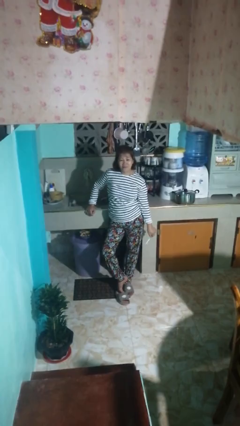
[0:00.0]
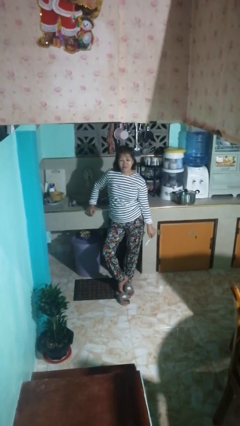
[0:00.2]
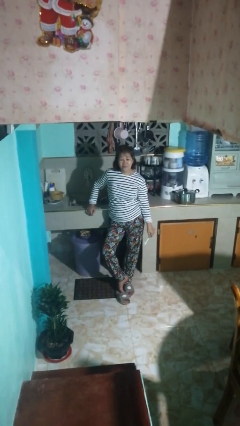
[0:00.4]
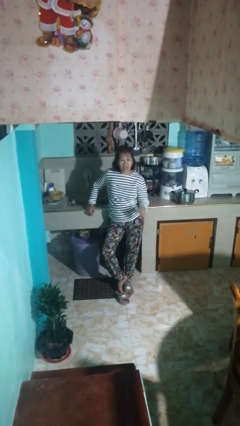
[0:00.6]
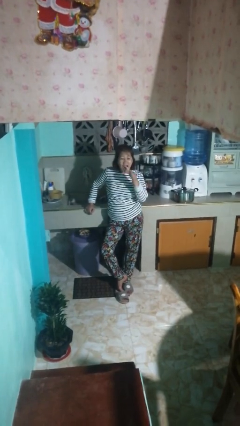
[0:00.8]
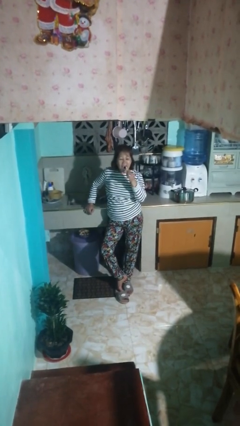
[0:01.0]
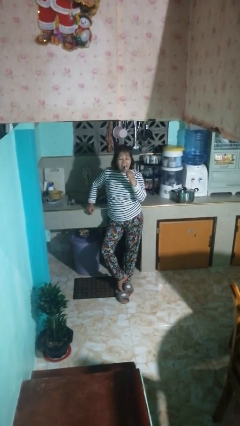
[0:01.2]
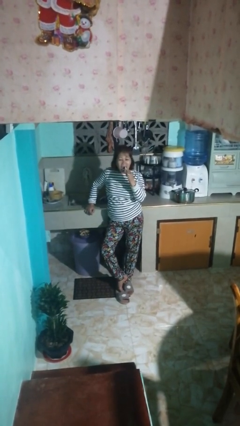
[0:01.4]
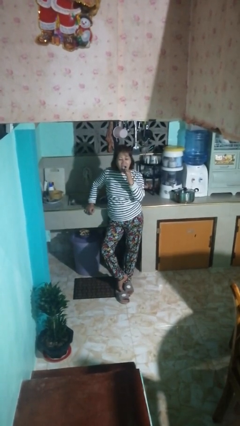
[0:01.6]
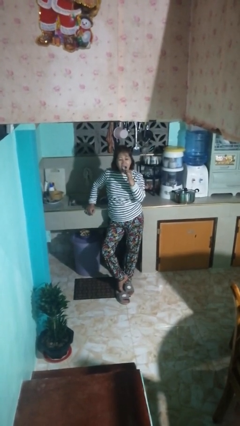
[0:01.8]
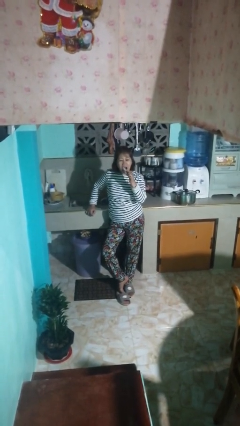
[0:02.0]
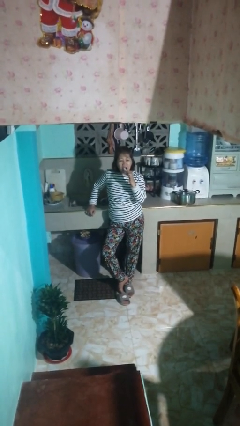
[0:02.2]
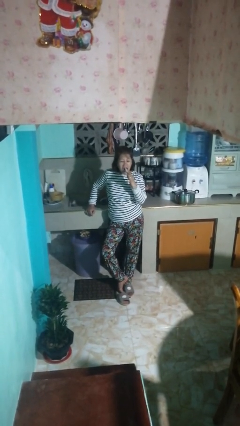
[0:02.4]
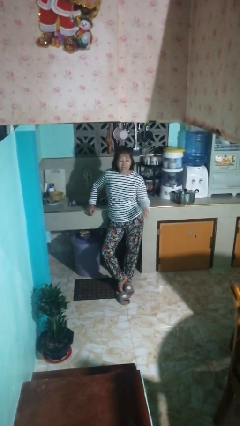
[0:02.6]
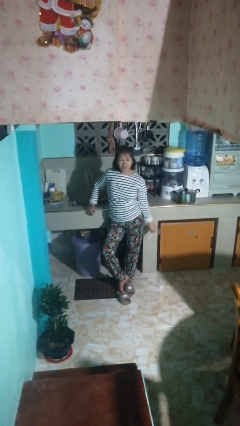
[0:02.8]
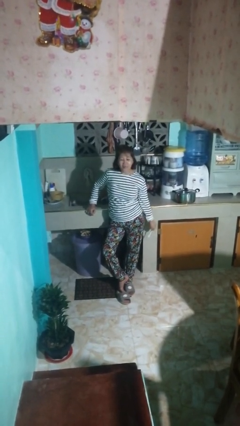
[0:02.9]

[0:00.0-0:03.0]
person brushes teeth

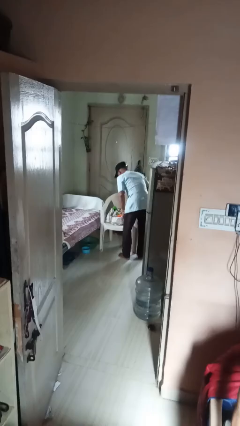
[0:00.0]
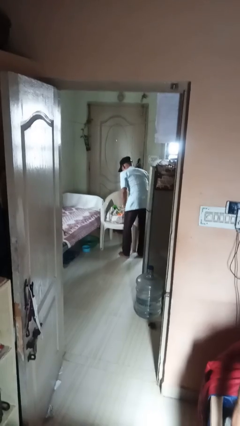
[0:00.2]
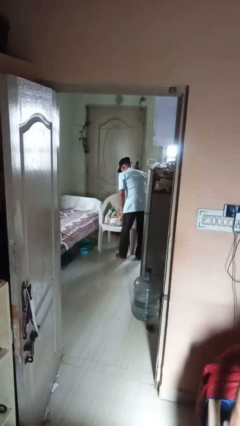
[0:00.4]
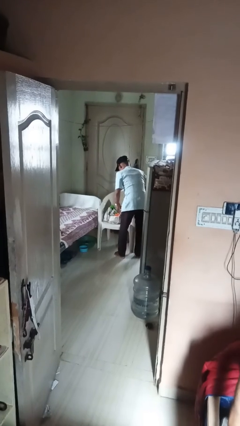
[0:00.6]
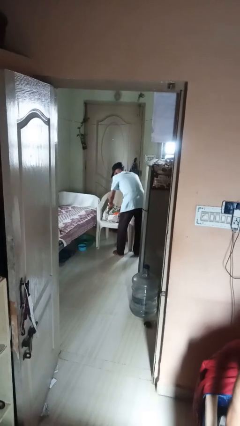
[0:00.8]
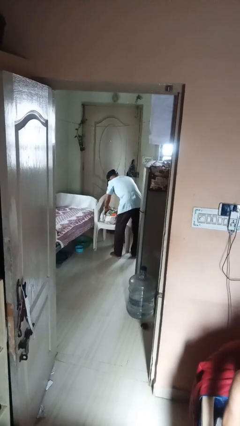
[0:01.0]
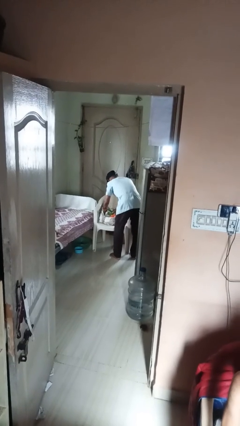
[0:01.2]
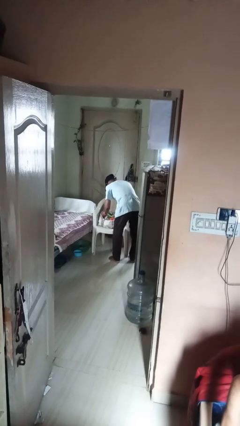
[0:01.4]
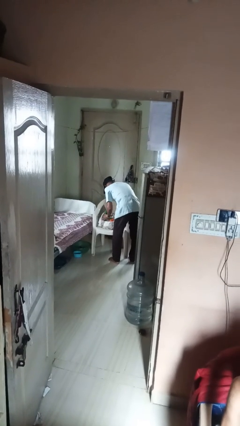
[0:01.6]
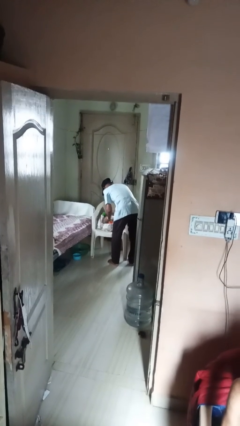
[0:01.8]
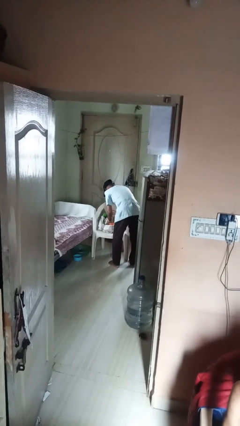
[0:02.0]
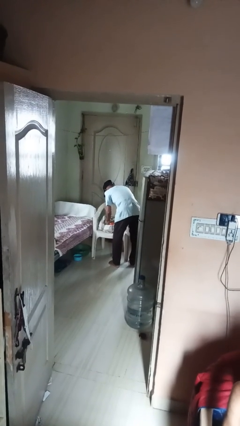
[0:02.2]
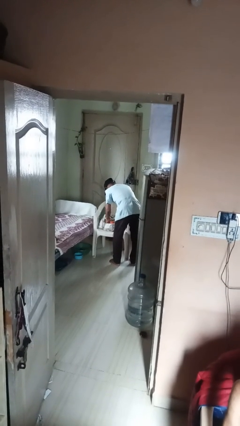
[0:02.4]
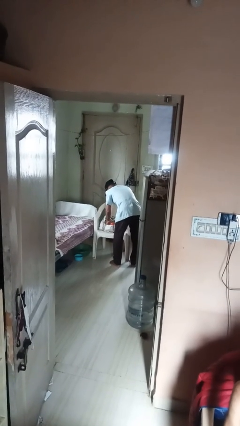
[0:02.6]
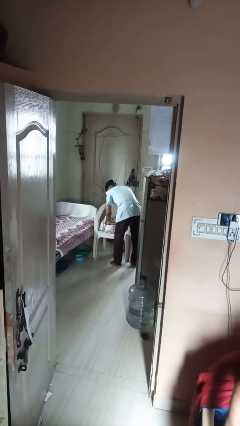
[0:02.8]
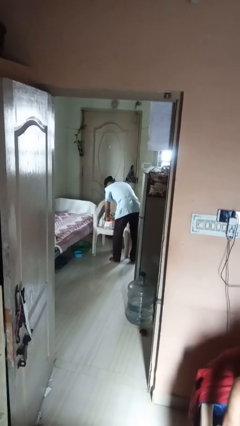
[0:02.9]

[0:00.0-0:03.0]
person searches in bag

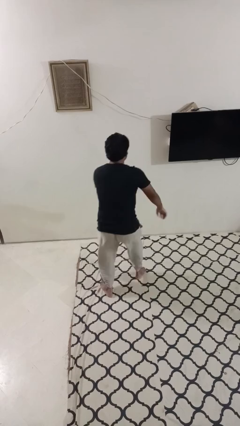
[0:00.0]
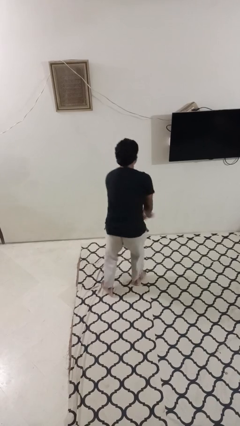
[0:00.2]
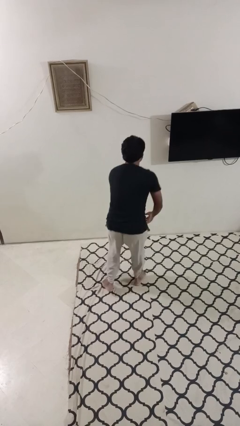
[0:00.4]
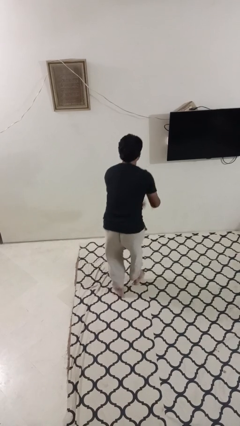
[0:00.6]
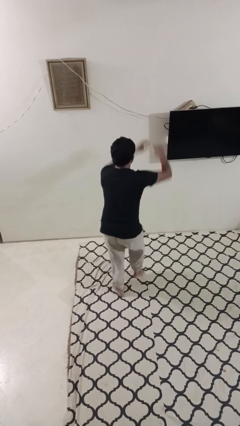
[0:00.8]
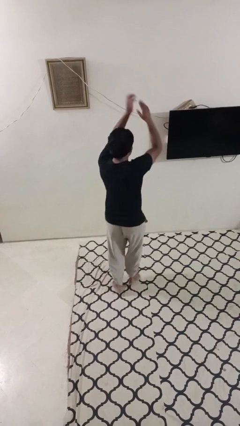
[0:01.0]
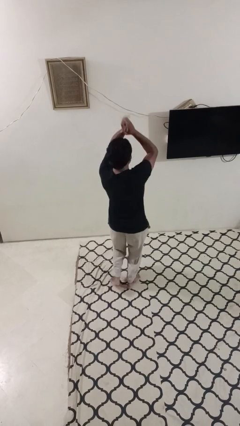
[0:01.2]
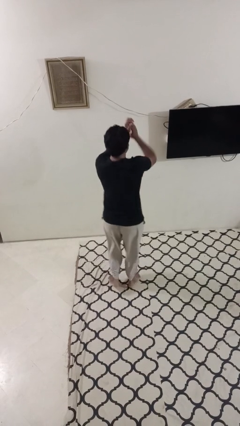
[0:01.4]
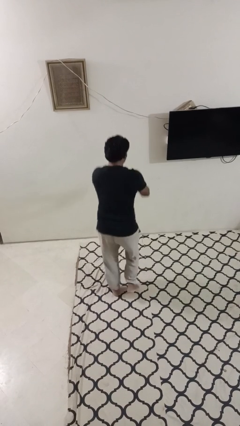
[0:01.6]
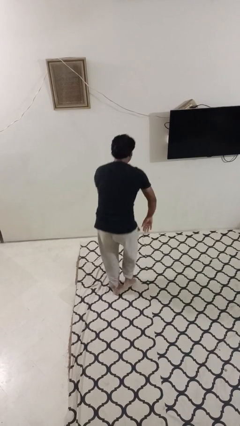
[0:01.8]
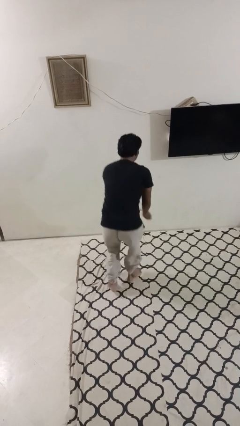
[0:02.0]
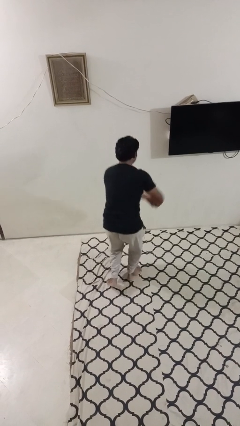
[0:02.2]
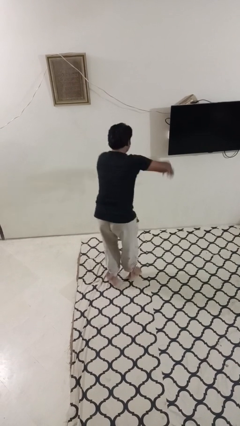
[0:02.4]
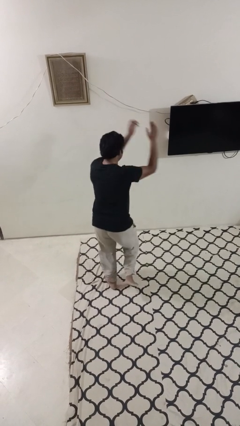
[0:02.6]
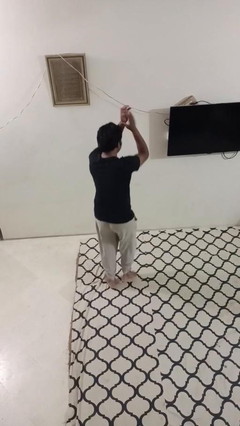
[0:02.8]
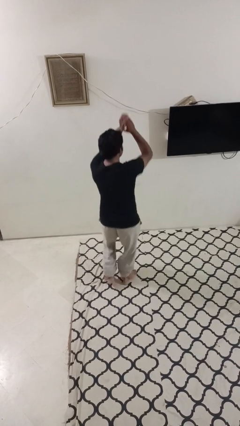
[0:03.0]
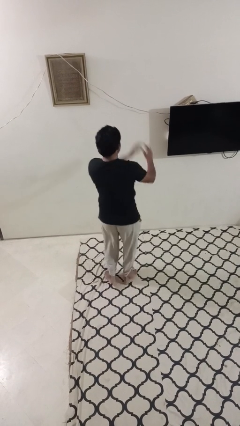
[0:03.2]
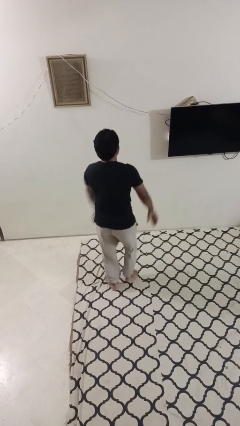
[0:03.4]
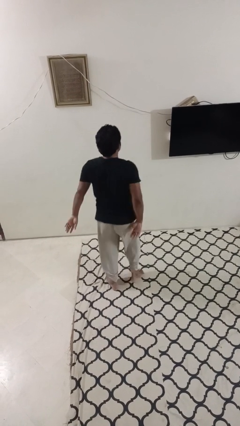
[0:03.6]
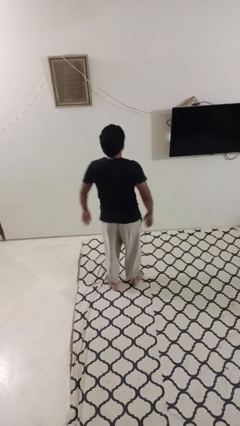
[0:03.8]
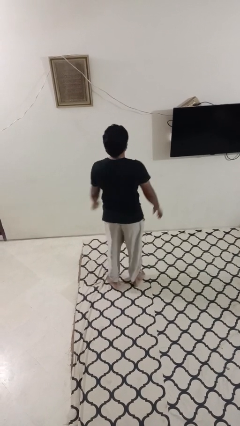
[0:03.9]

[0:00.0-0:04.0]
person dances in place

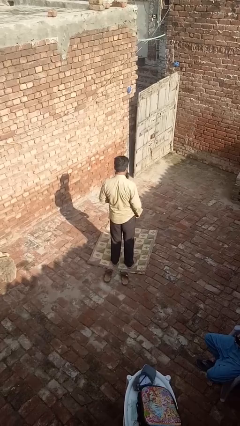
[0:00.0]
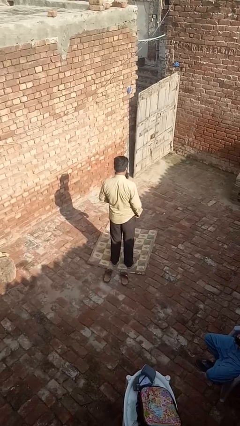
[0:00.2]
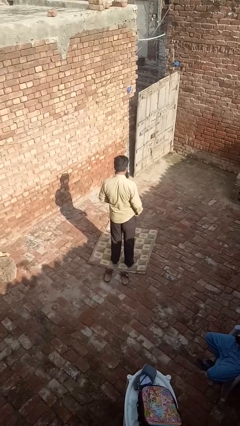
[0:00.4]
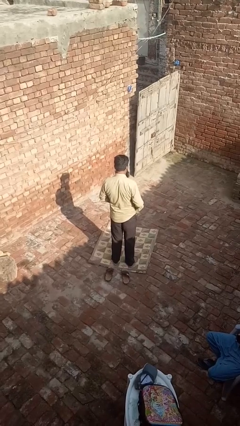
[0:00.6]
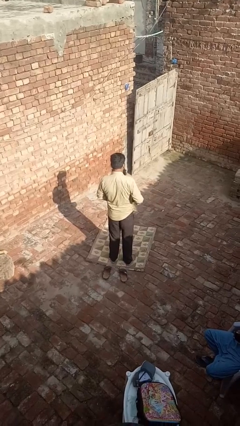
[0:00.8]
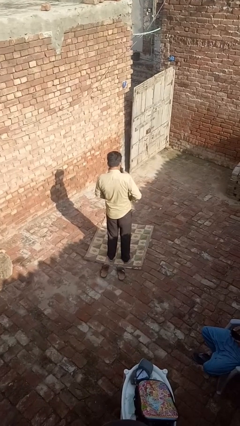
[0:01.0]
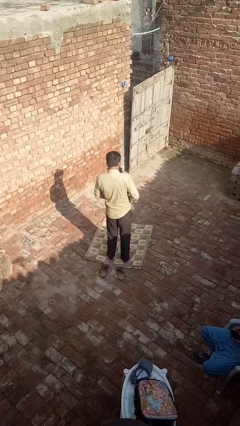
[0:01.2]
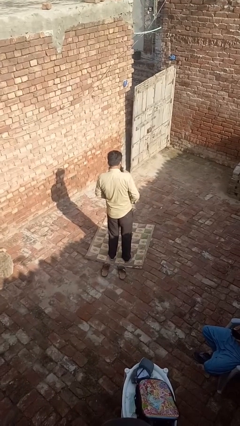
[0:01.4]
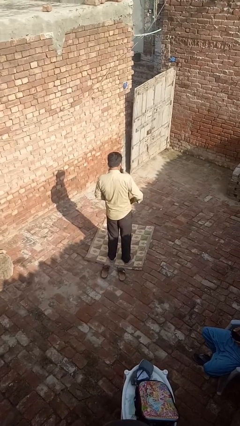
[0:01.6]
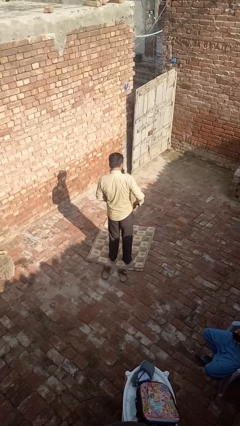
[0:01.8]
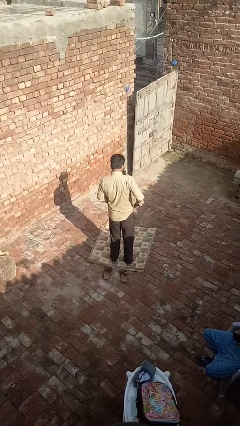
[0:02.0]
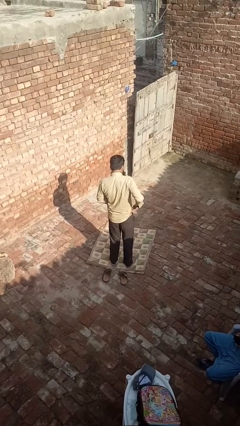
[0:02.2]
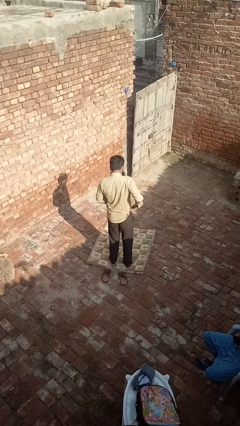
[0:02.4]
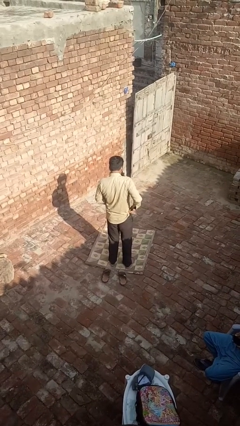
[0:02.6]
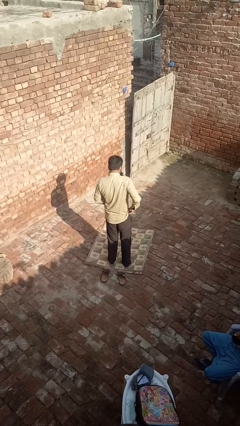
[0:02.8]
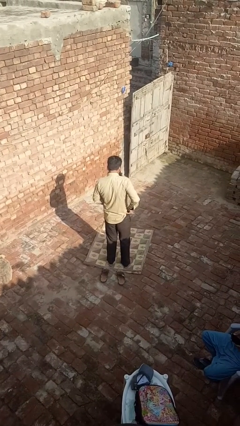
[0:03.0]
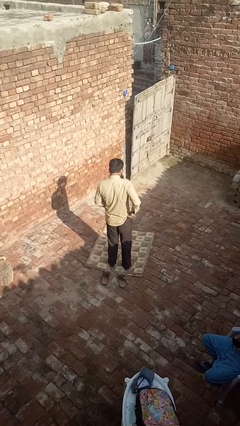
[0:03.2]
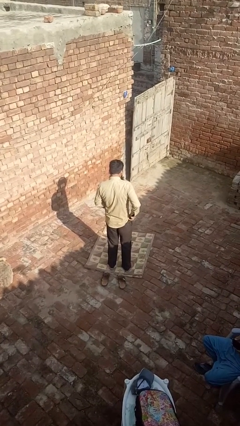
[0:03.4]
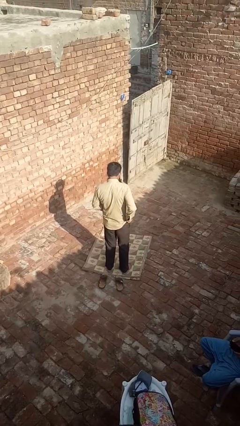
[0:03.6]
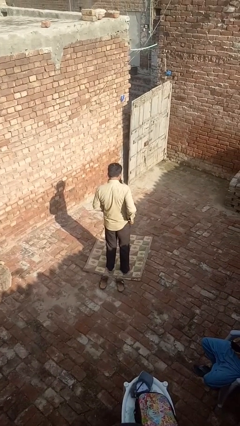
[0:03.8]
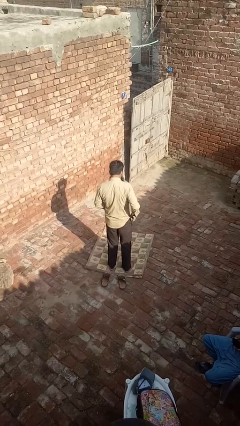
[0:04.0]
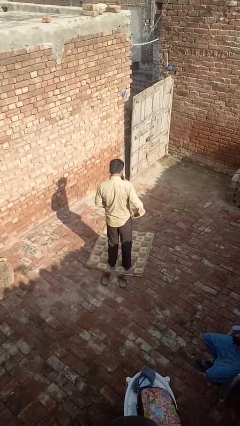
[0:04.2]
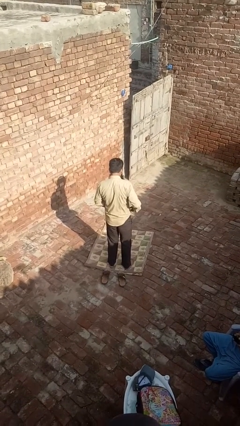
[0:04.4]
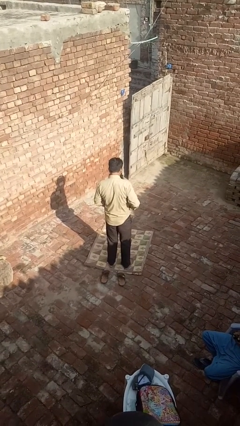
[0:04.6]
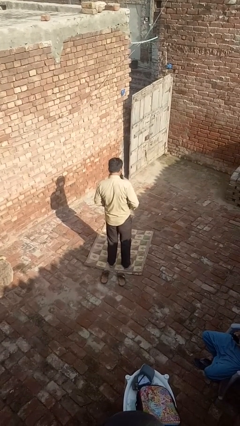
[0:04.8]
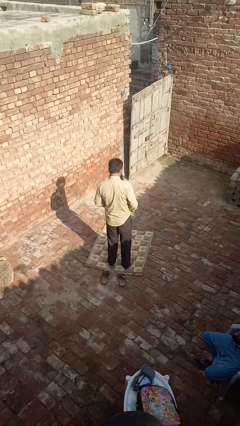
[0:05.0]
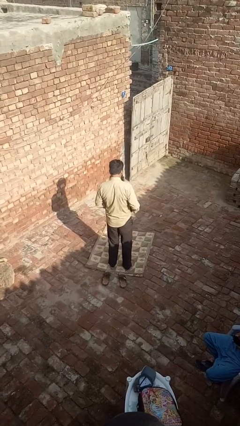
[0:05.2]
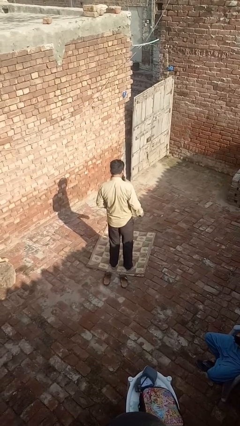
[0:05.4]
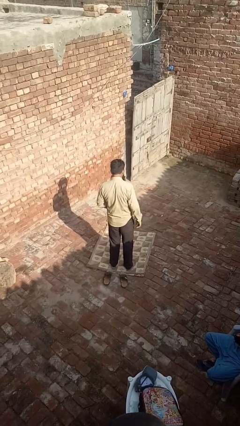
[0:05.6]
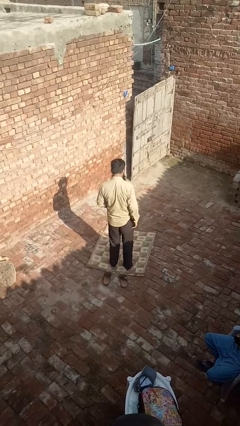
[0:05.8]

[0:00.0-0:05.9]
person tucks in shirt

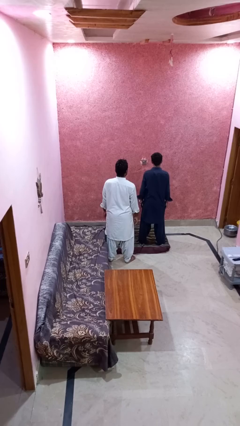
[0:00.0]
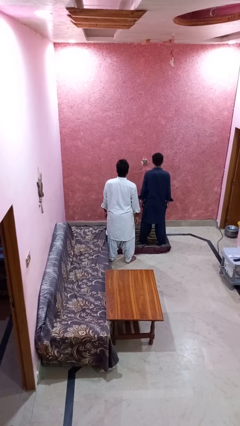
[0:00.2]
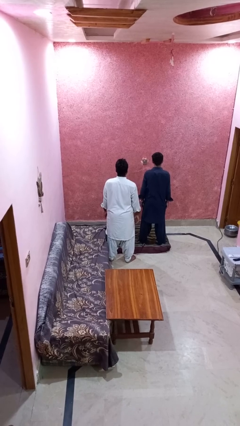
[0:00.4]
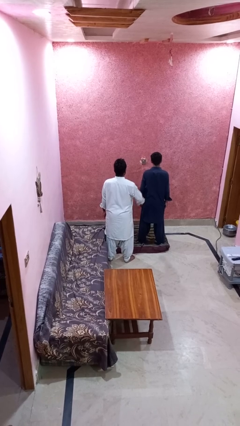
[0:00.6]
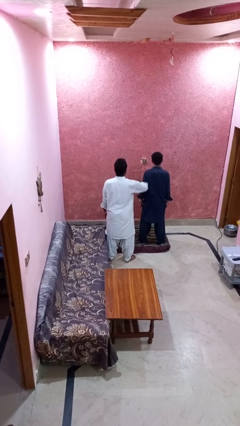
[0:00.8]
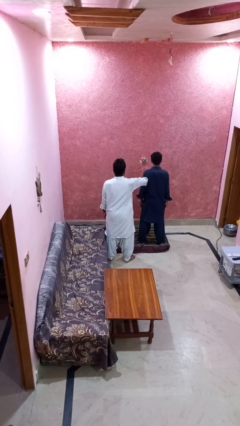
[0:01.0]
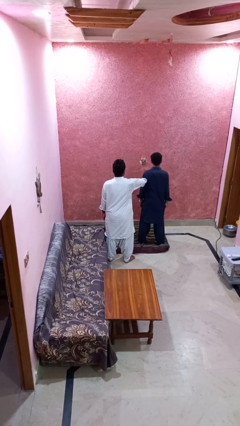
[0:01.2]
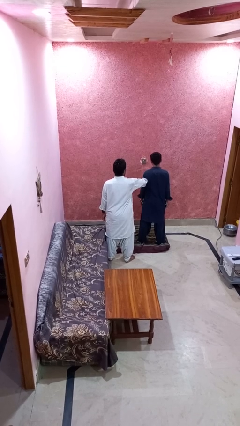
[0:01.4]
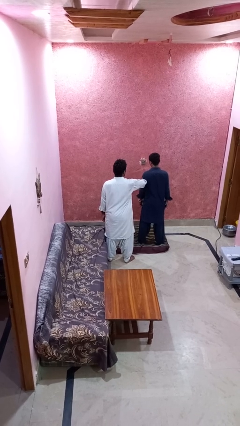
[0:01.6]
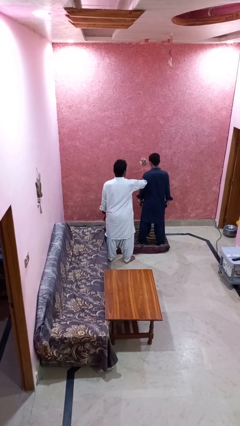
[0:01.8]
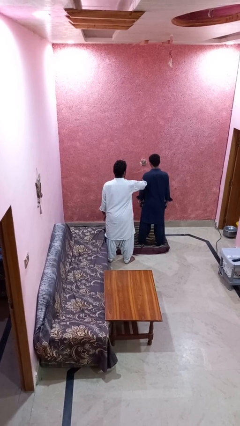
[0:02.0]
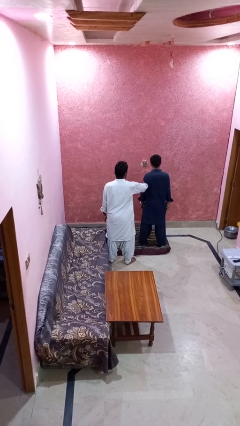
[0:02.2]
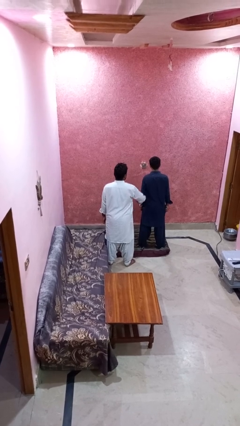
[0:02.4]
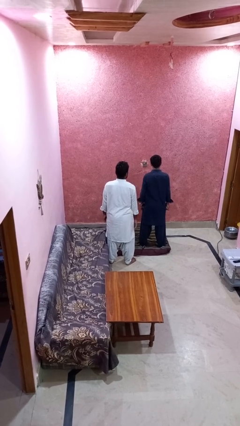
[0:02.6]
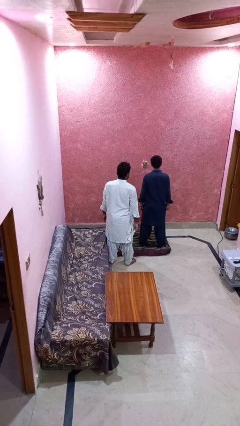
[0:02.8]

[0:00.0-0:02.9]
person grabs person by forearm
